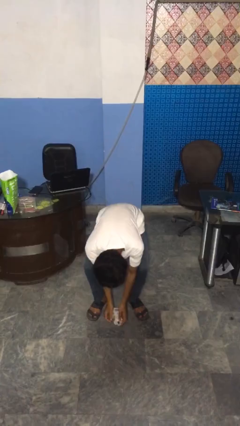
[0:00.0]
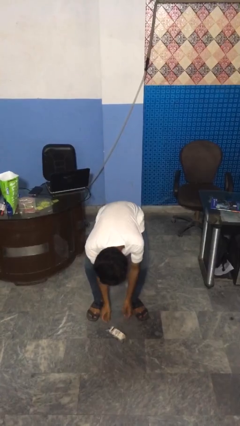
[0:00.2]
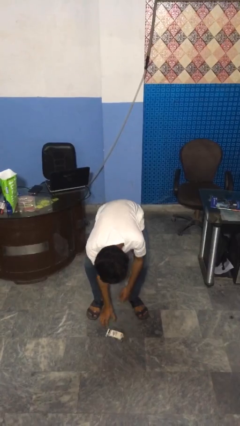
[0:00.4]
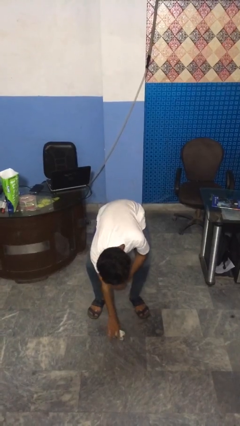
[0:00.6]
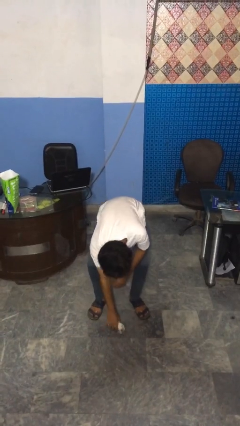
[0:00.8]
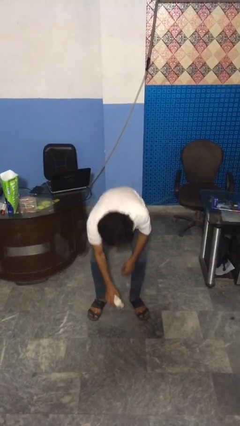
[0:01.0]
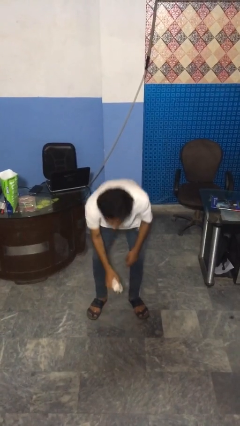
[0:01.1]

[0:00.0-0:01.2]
person picks up object from floor

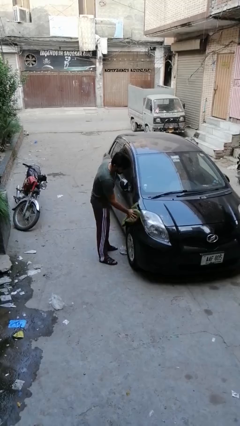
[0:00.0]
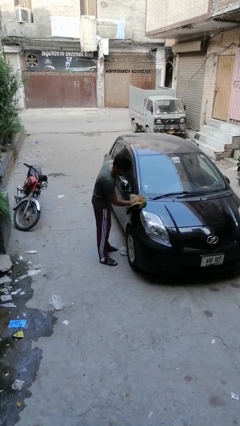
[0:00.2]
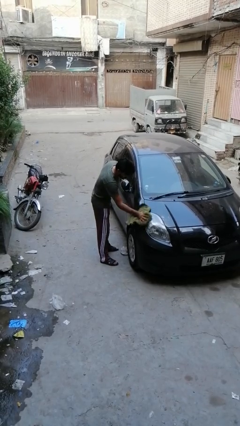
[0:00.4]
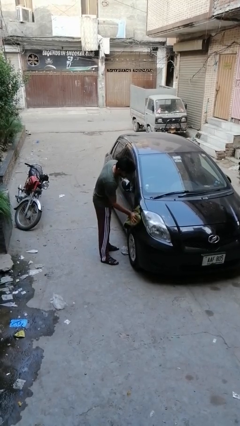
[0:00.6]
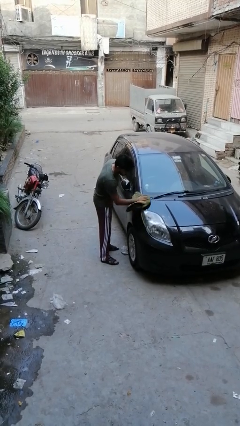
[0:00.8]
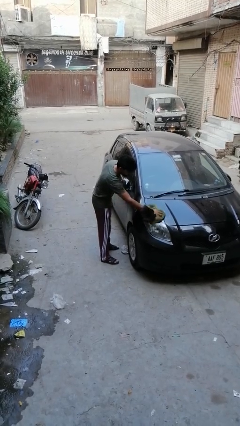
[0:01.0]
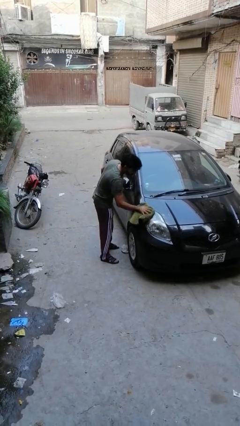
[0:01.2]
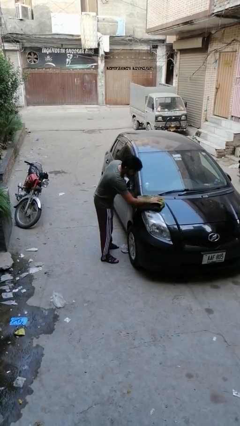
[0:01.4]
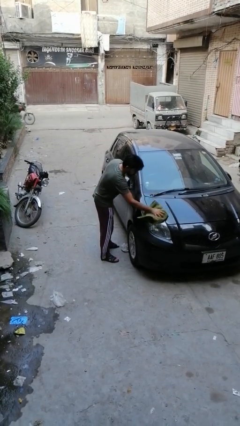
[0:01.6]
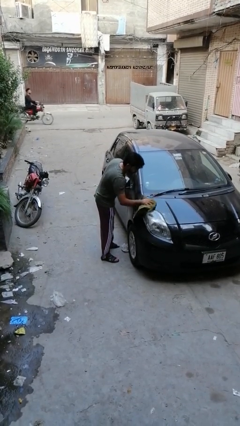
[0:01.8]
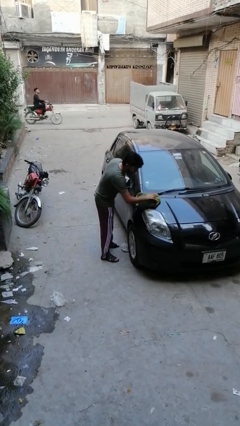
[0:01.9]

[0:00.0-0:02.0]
person polishes car with rag

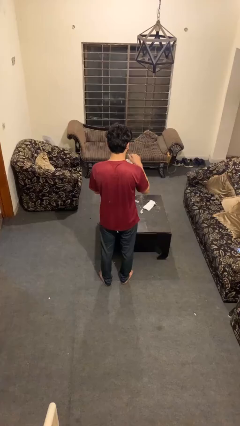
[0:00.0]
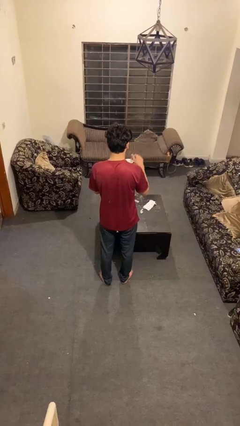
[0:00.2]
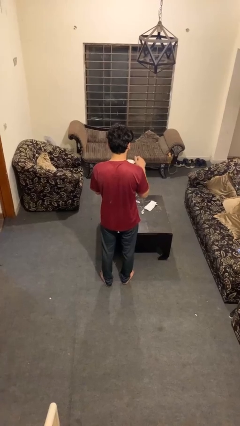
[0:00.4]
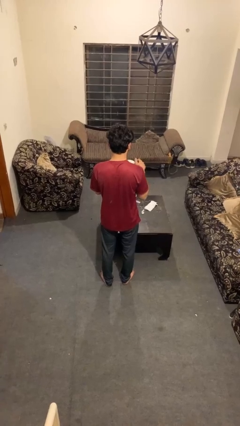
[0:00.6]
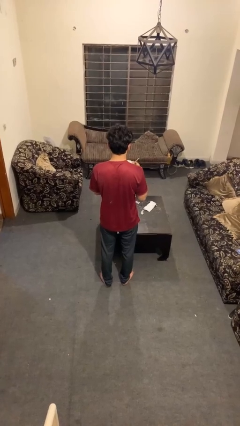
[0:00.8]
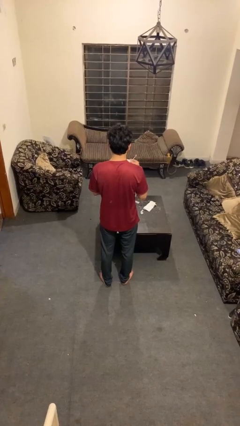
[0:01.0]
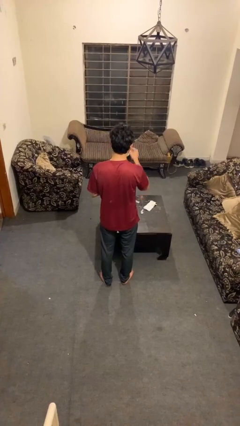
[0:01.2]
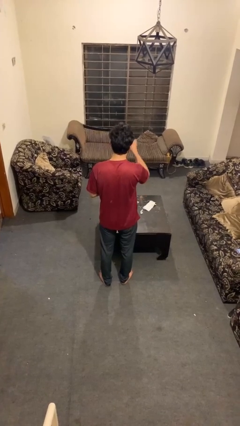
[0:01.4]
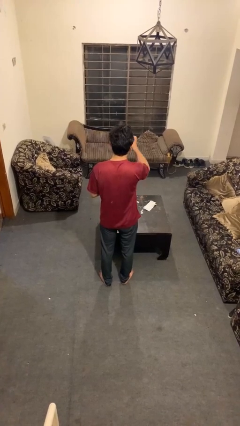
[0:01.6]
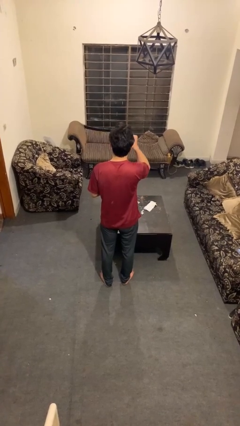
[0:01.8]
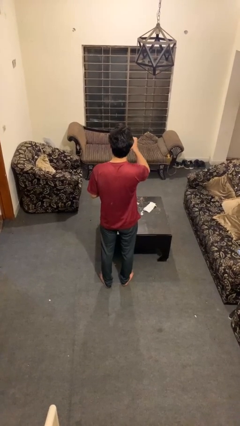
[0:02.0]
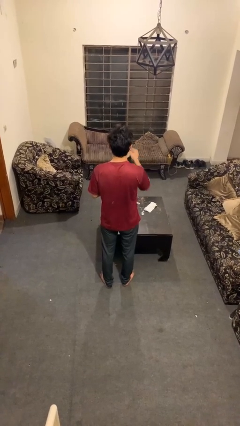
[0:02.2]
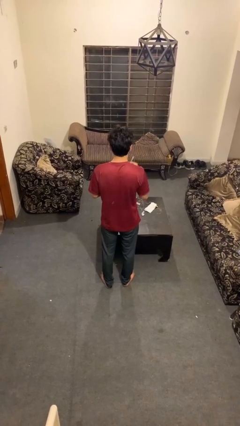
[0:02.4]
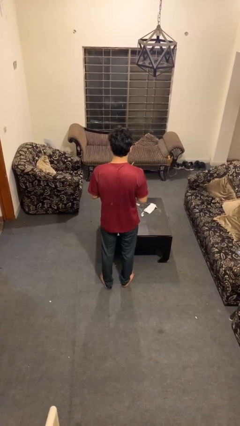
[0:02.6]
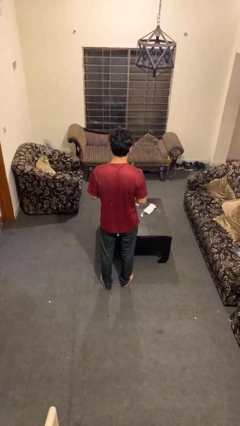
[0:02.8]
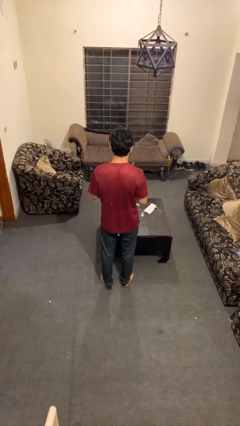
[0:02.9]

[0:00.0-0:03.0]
person drinks from mug

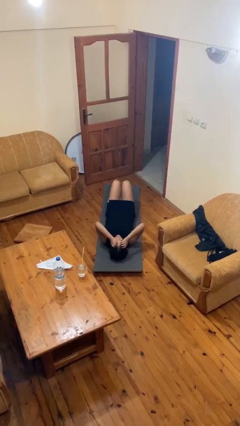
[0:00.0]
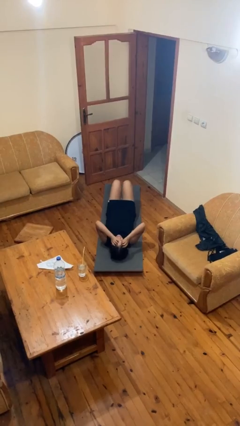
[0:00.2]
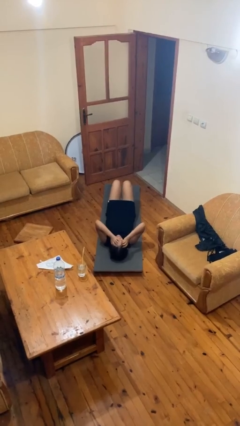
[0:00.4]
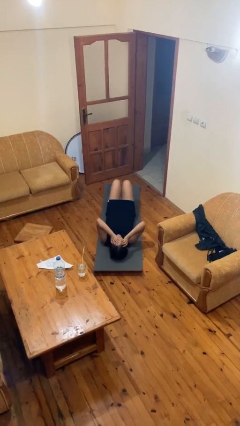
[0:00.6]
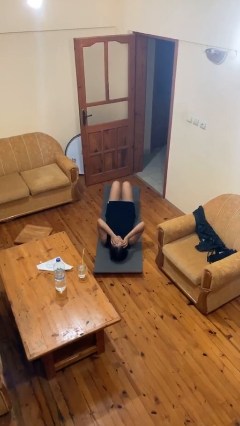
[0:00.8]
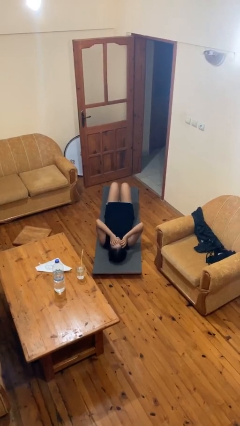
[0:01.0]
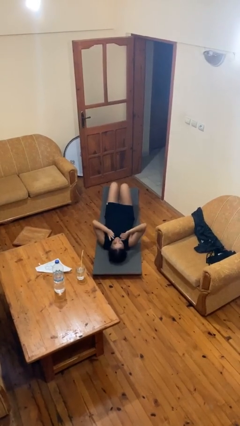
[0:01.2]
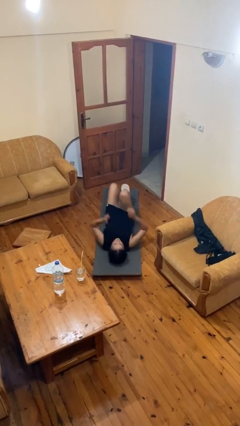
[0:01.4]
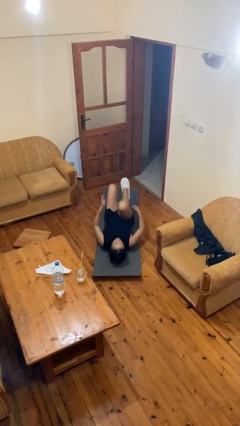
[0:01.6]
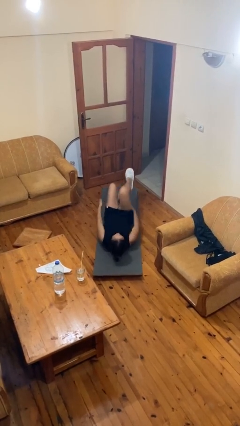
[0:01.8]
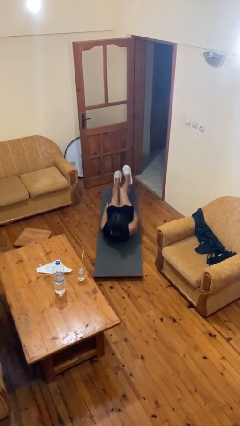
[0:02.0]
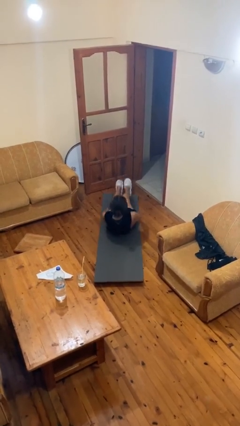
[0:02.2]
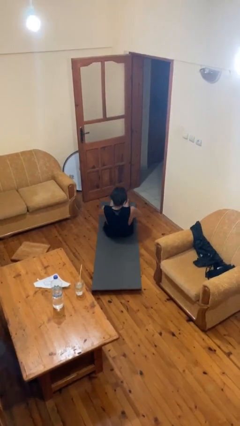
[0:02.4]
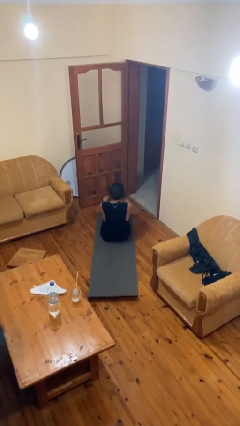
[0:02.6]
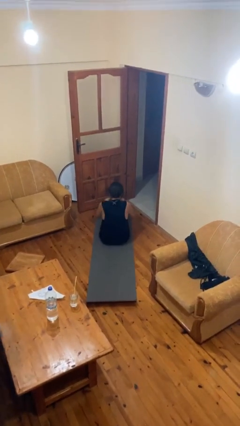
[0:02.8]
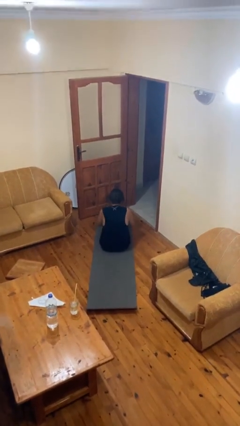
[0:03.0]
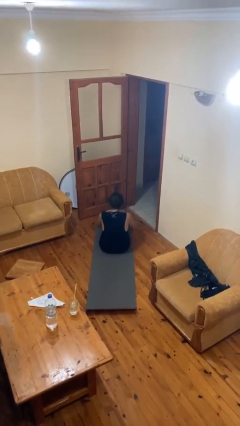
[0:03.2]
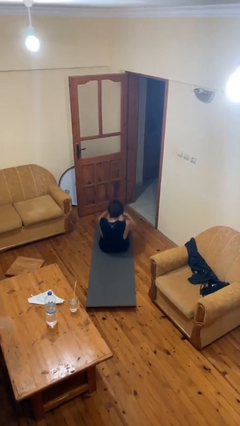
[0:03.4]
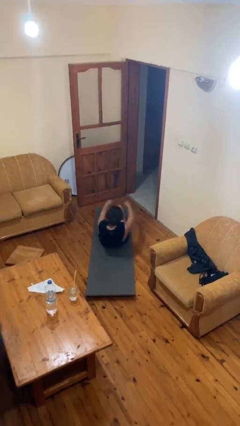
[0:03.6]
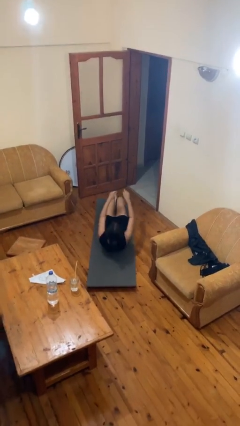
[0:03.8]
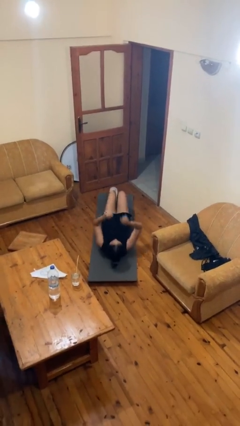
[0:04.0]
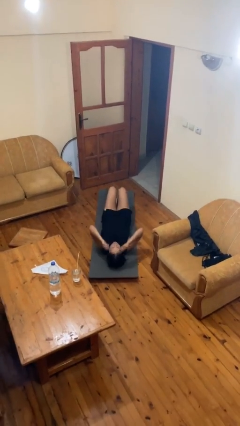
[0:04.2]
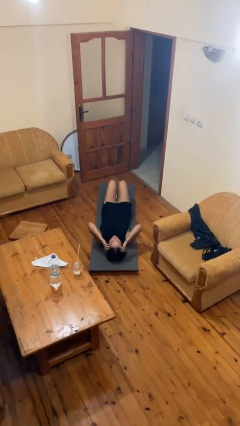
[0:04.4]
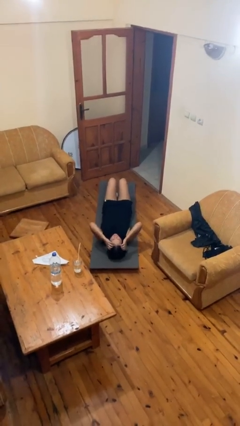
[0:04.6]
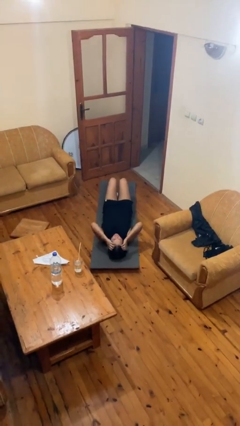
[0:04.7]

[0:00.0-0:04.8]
person exercises with situp

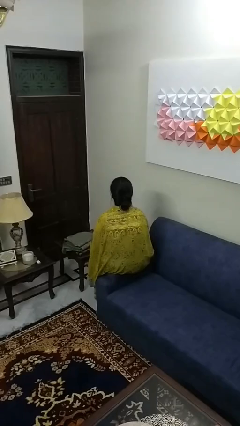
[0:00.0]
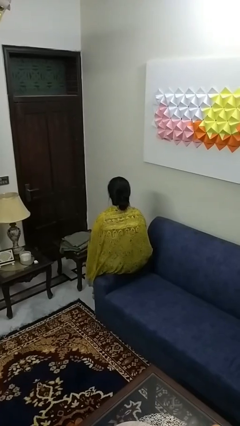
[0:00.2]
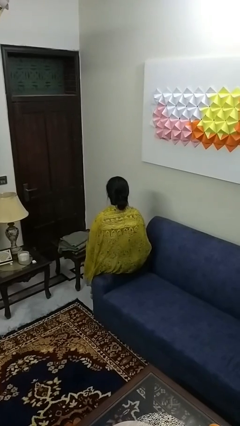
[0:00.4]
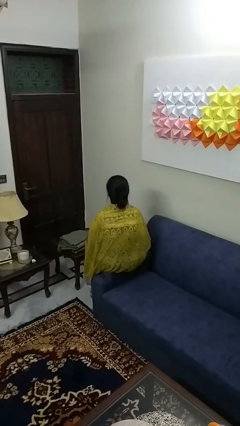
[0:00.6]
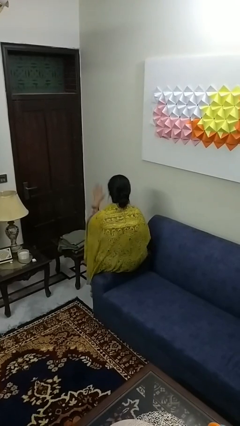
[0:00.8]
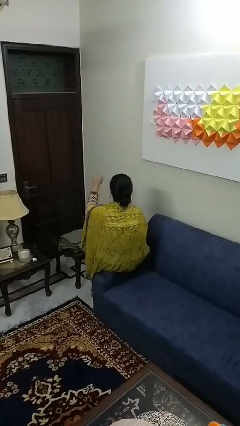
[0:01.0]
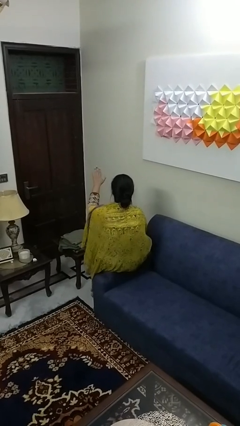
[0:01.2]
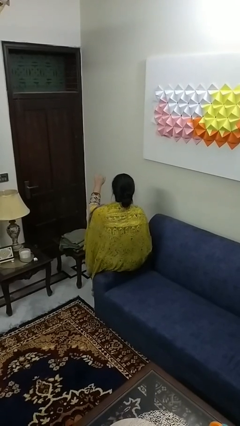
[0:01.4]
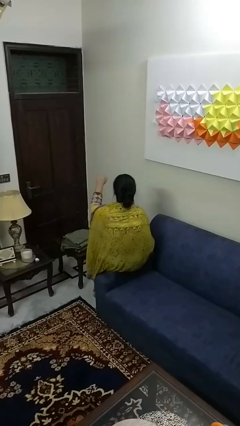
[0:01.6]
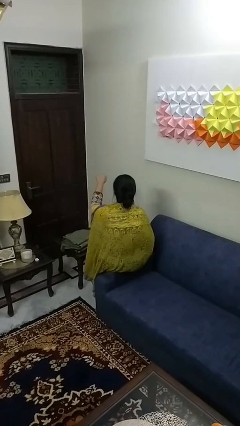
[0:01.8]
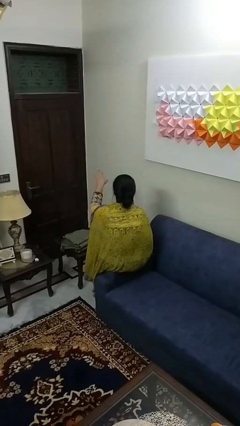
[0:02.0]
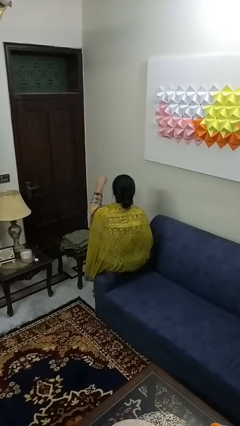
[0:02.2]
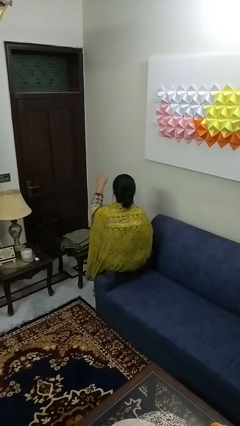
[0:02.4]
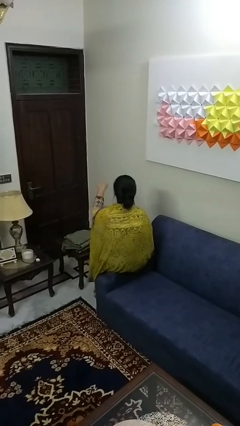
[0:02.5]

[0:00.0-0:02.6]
person gestures come here

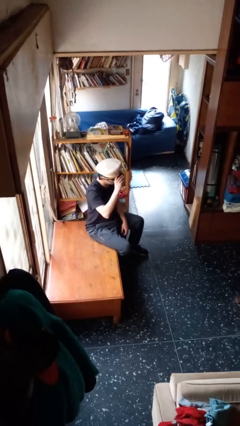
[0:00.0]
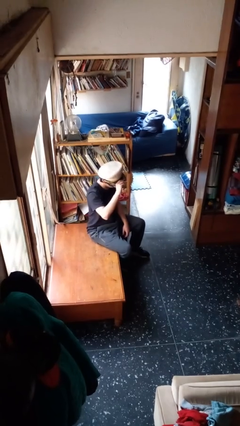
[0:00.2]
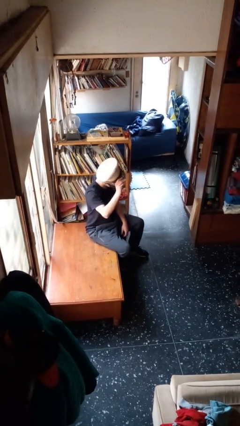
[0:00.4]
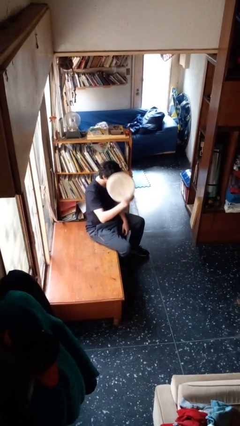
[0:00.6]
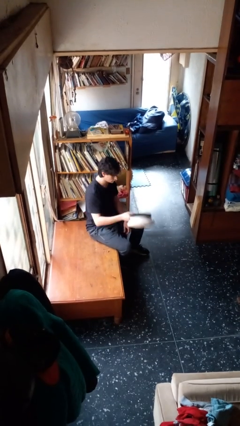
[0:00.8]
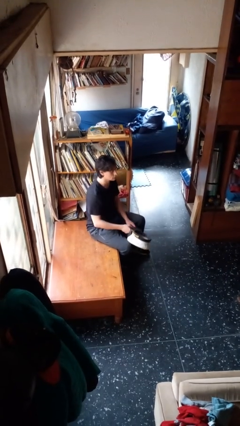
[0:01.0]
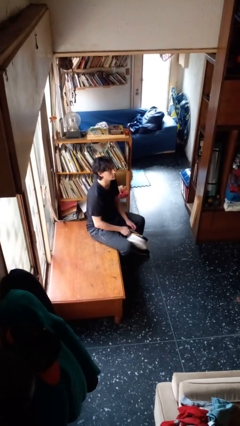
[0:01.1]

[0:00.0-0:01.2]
person takes off hat

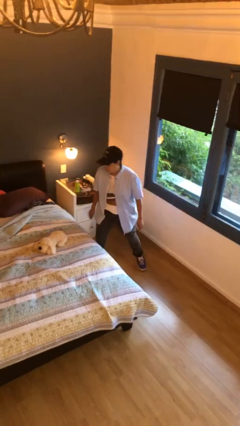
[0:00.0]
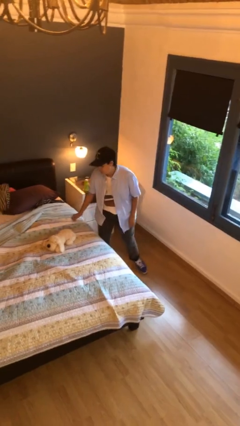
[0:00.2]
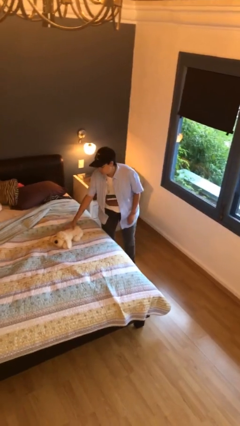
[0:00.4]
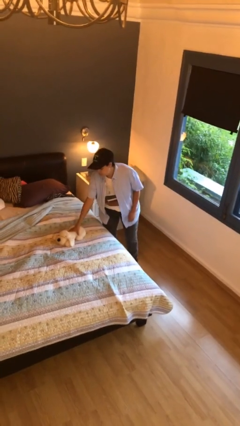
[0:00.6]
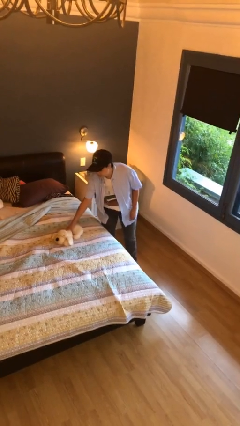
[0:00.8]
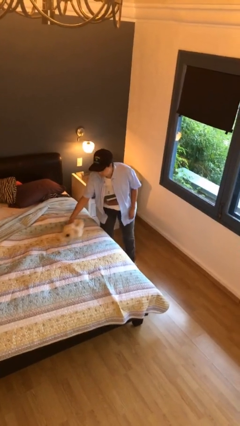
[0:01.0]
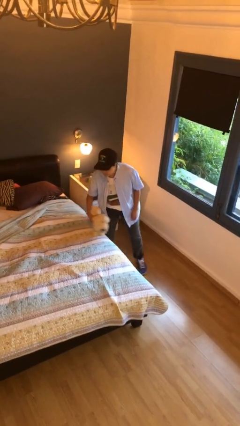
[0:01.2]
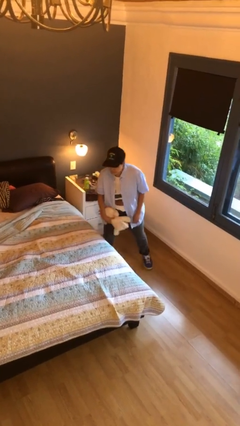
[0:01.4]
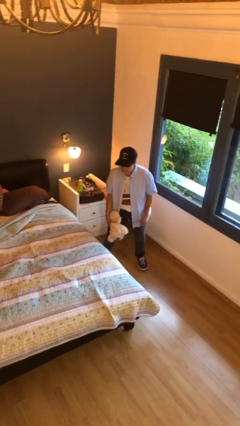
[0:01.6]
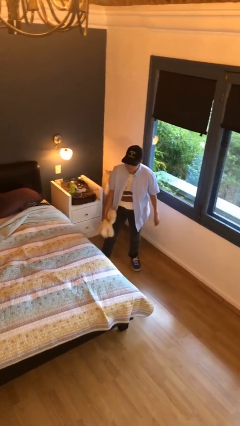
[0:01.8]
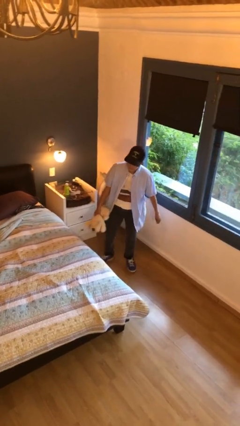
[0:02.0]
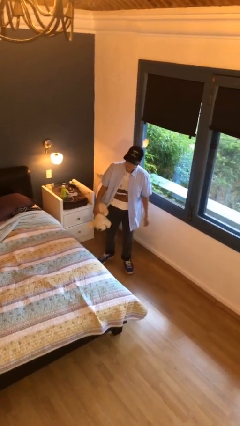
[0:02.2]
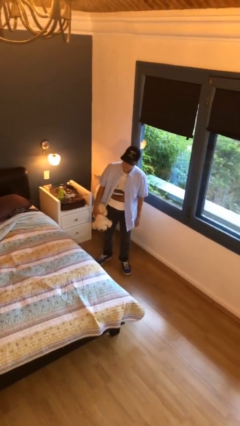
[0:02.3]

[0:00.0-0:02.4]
person picks up object from bed
